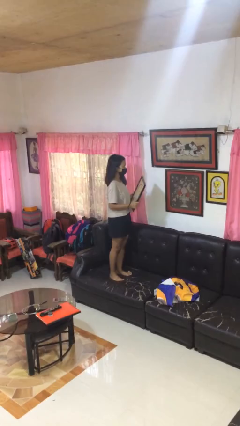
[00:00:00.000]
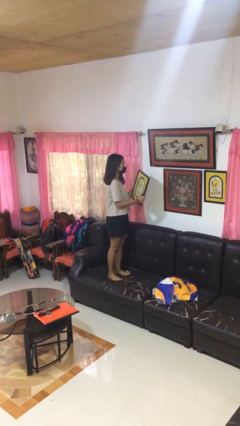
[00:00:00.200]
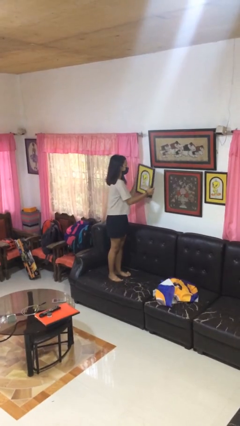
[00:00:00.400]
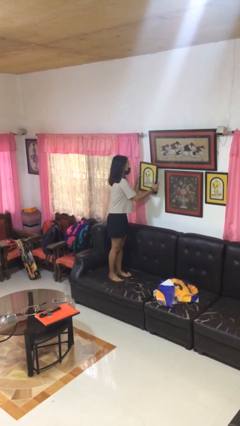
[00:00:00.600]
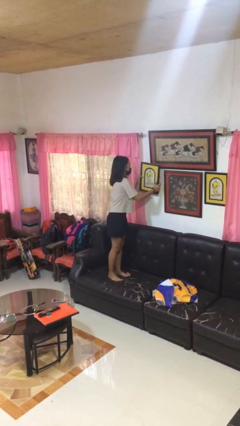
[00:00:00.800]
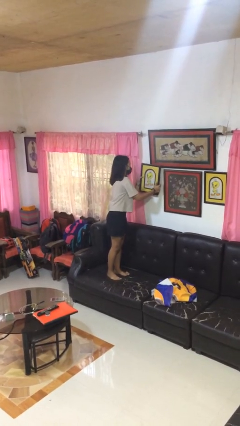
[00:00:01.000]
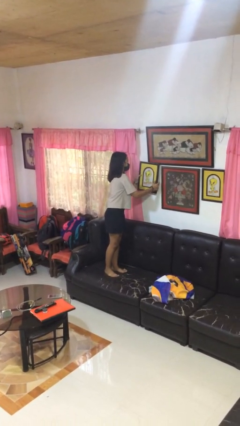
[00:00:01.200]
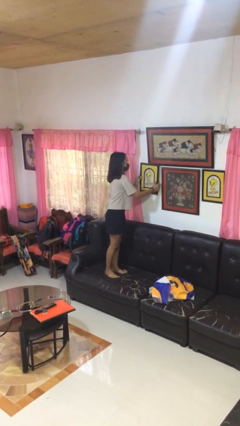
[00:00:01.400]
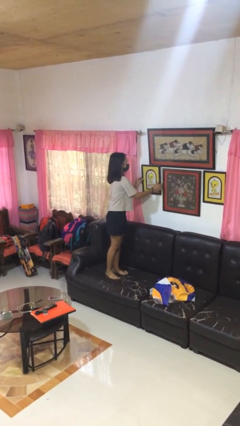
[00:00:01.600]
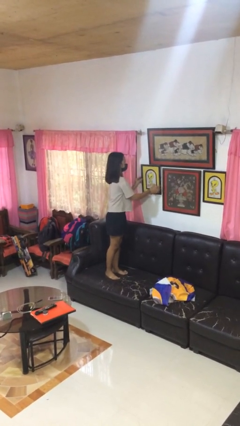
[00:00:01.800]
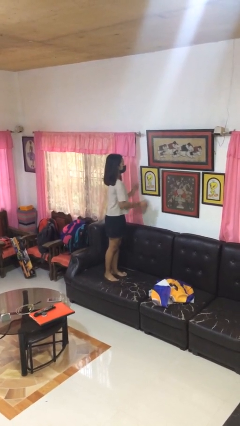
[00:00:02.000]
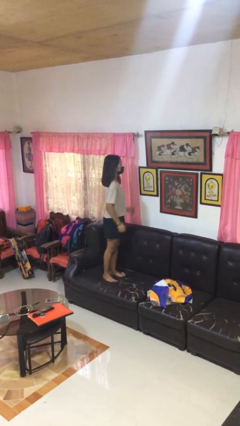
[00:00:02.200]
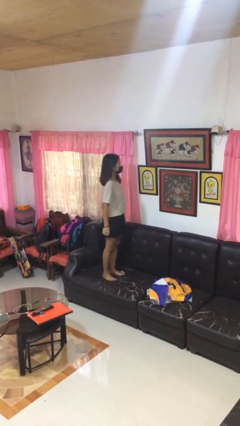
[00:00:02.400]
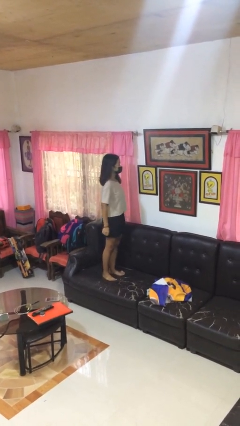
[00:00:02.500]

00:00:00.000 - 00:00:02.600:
person puts up picture frame

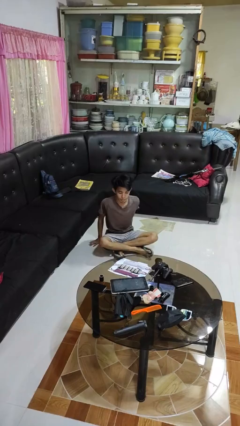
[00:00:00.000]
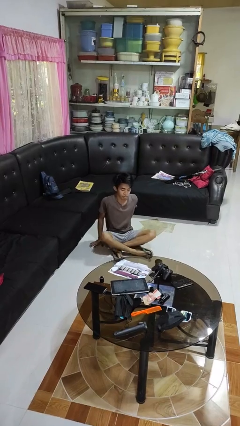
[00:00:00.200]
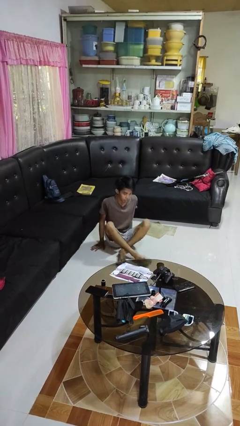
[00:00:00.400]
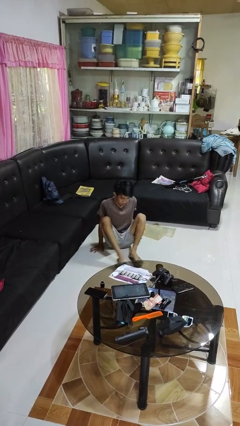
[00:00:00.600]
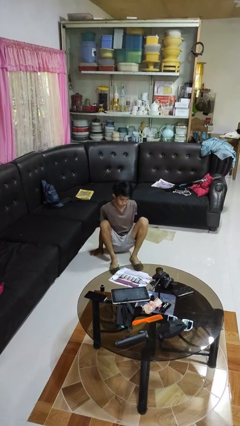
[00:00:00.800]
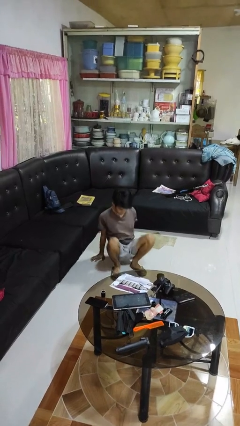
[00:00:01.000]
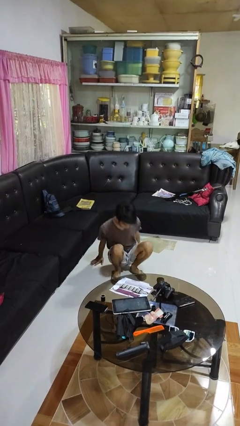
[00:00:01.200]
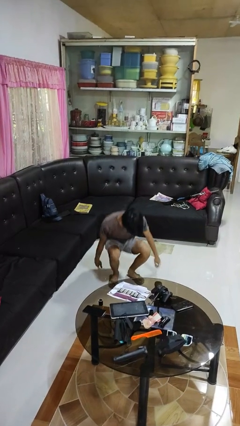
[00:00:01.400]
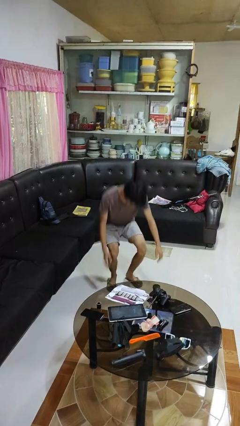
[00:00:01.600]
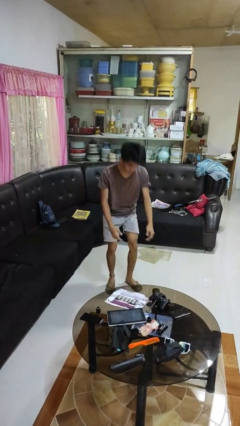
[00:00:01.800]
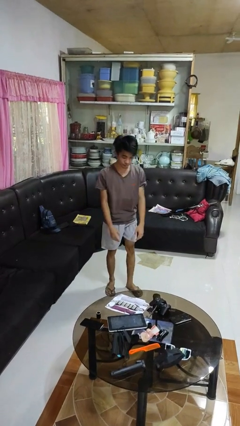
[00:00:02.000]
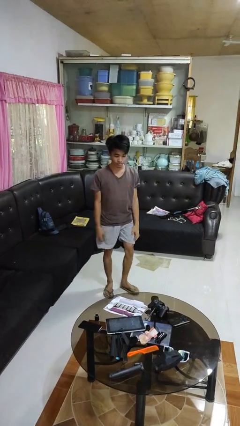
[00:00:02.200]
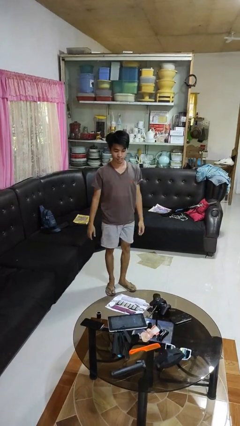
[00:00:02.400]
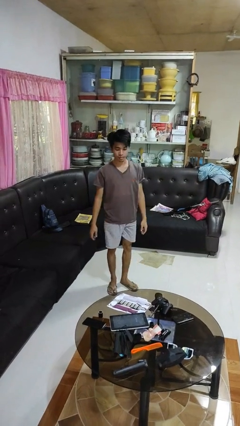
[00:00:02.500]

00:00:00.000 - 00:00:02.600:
person stands up from floor

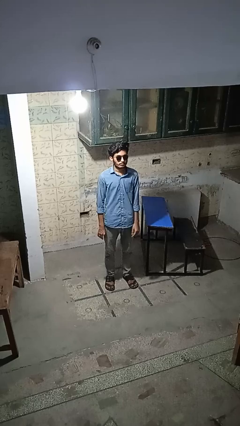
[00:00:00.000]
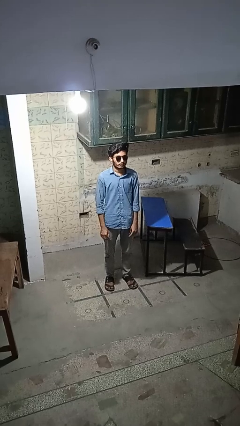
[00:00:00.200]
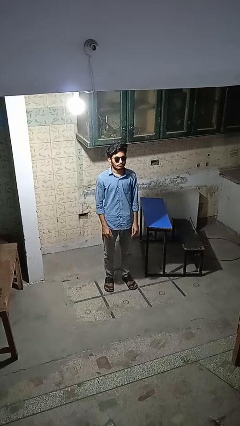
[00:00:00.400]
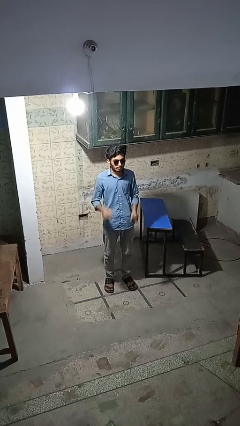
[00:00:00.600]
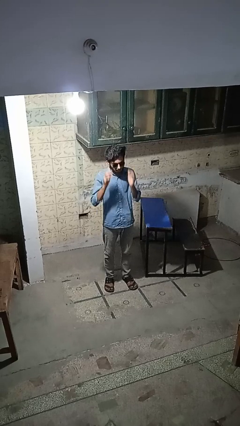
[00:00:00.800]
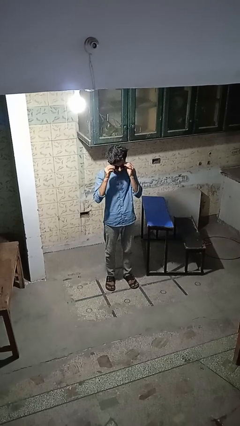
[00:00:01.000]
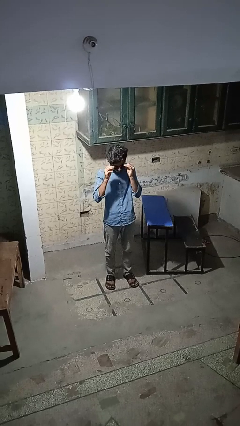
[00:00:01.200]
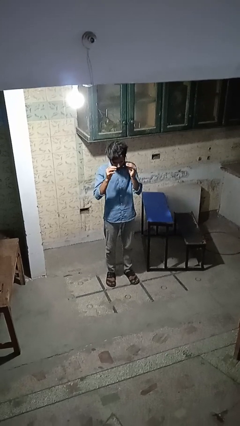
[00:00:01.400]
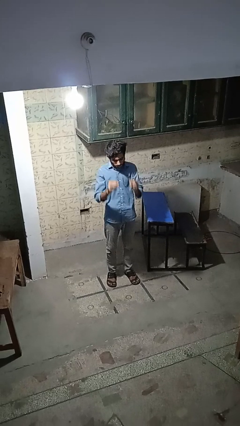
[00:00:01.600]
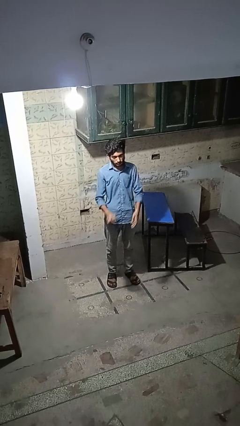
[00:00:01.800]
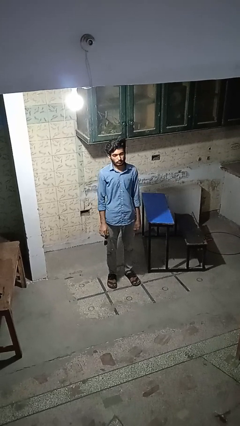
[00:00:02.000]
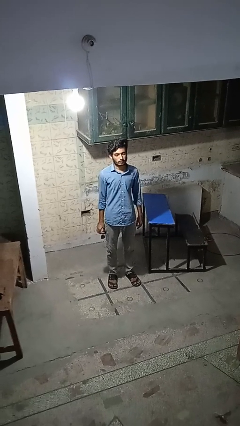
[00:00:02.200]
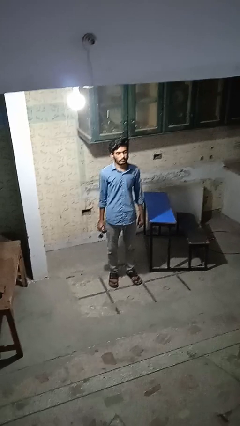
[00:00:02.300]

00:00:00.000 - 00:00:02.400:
person takes off sunglasses

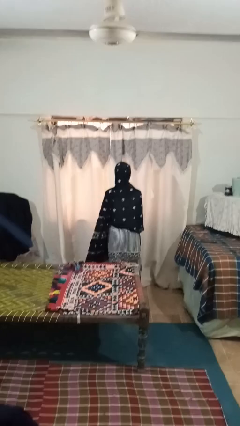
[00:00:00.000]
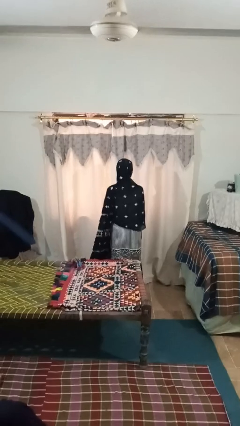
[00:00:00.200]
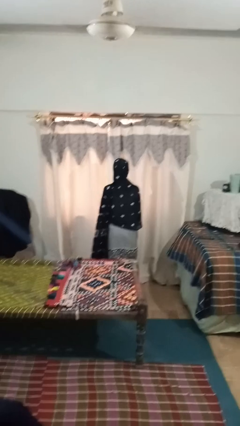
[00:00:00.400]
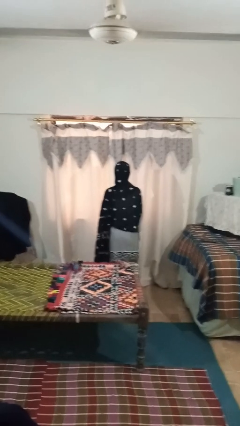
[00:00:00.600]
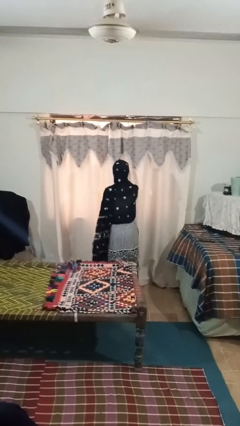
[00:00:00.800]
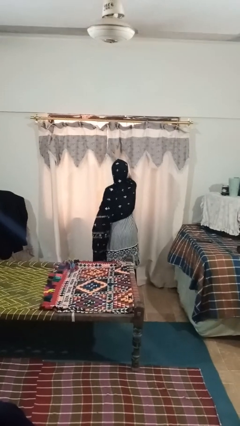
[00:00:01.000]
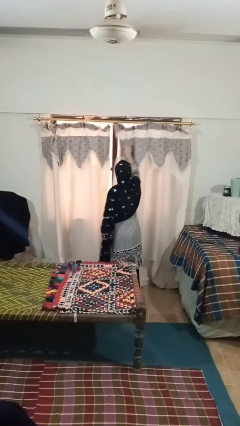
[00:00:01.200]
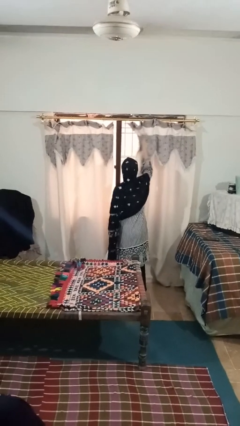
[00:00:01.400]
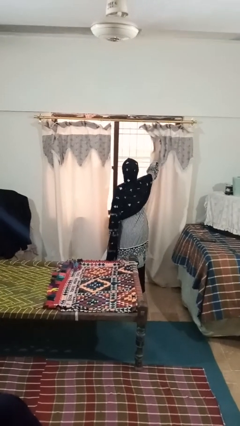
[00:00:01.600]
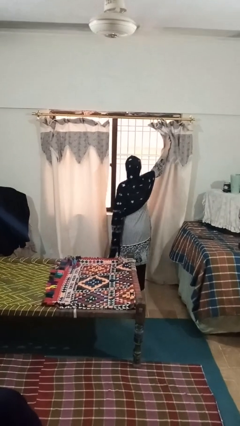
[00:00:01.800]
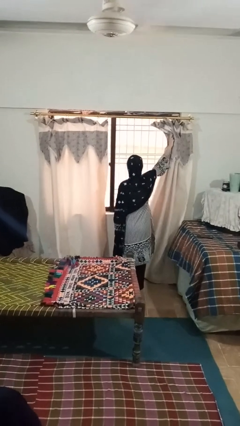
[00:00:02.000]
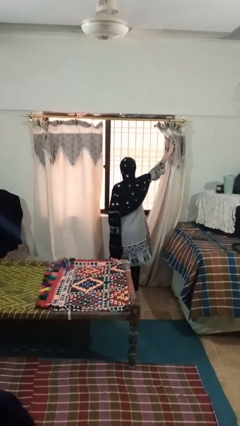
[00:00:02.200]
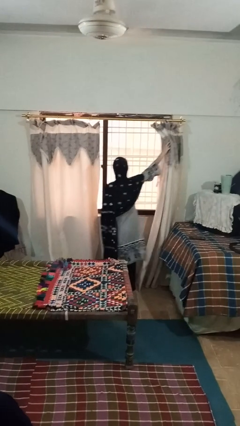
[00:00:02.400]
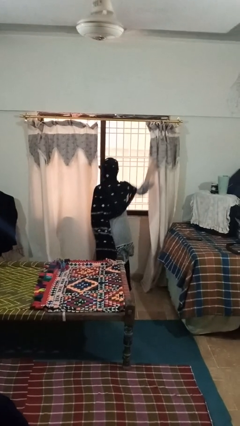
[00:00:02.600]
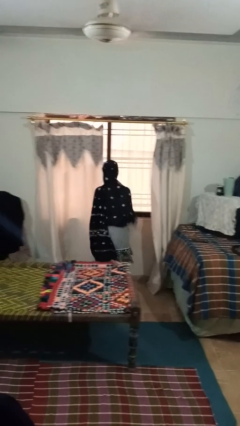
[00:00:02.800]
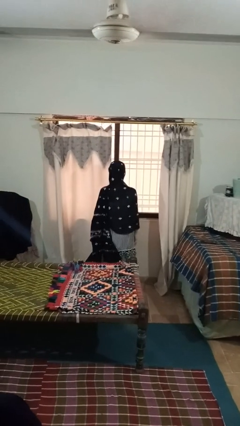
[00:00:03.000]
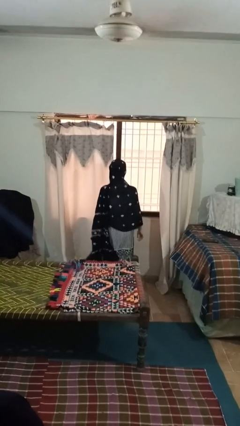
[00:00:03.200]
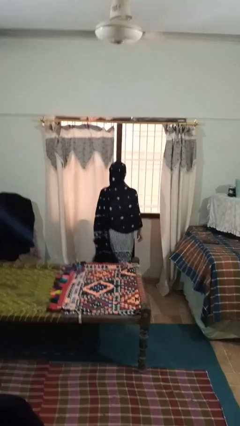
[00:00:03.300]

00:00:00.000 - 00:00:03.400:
person opens curtains

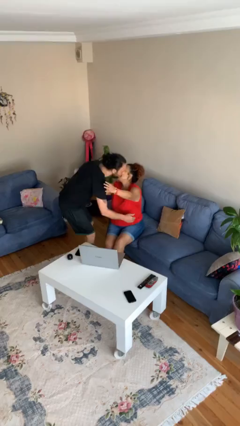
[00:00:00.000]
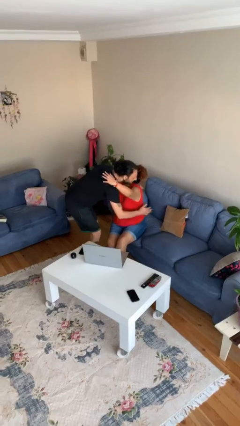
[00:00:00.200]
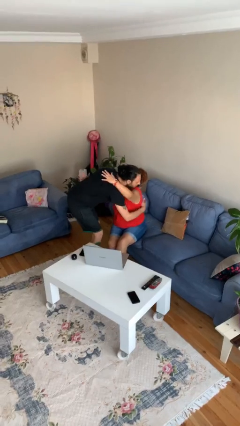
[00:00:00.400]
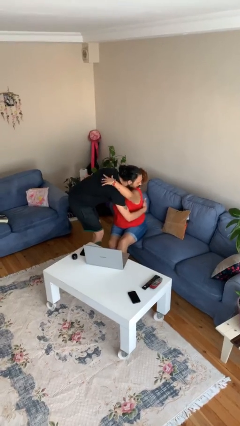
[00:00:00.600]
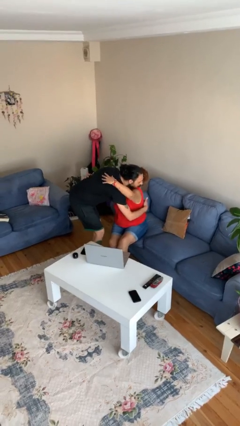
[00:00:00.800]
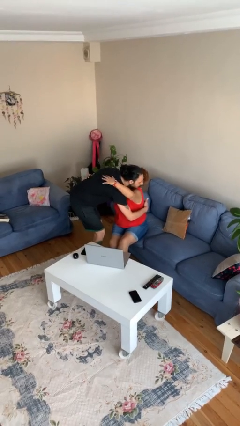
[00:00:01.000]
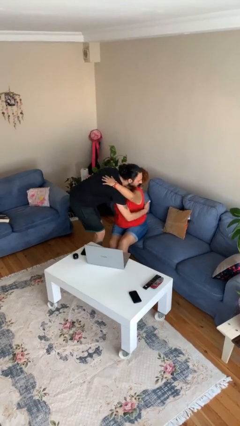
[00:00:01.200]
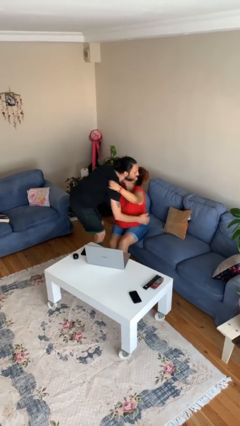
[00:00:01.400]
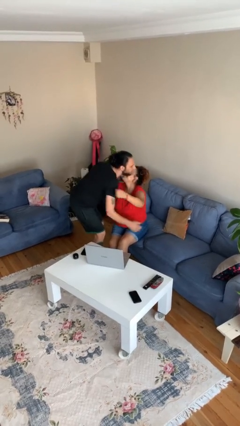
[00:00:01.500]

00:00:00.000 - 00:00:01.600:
person embraces person

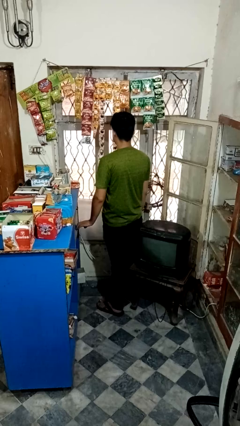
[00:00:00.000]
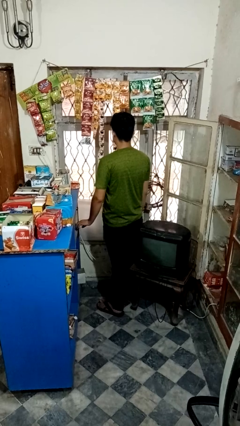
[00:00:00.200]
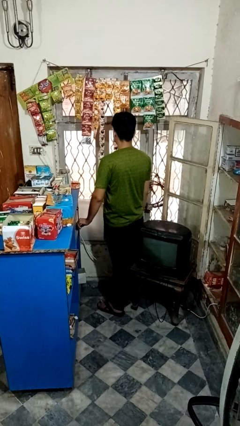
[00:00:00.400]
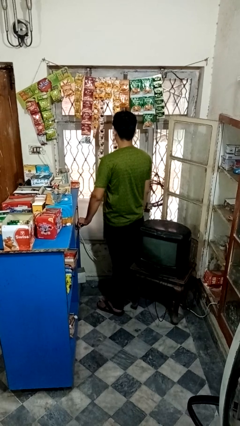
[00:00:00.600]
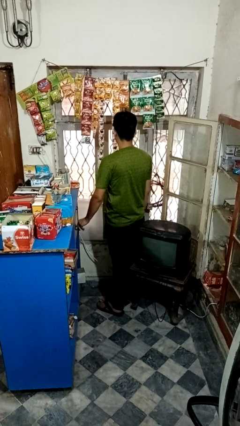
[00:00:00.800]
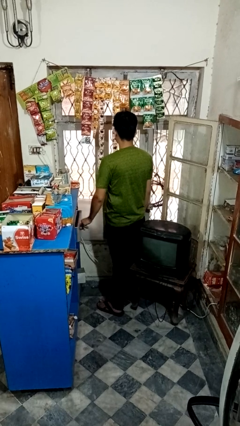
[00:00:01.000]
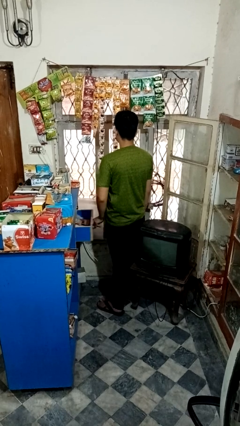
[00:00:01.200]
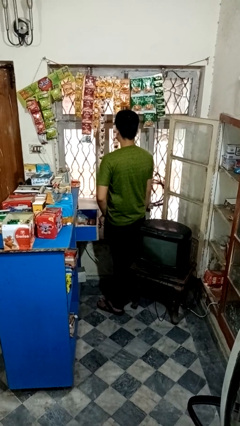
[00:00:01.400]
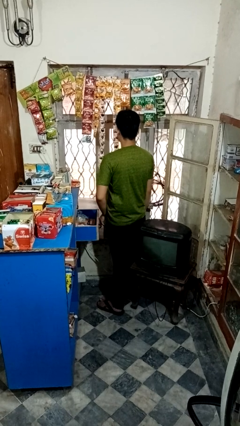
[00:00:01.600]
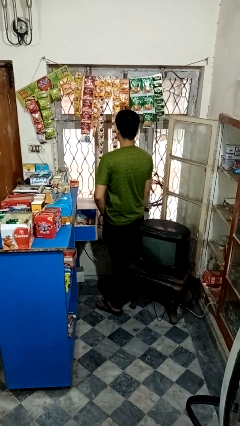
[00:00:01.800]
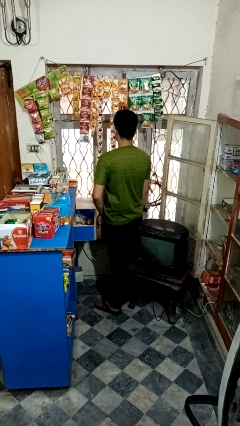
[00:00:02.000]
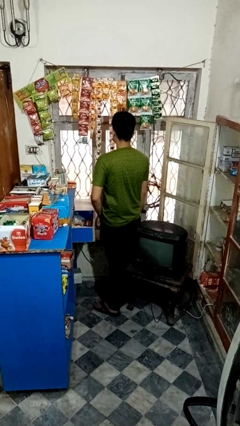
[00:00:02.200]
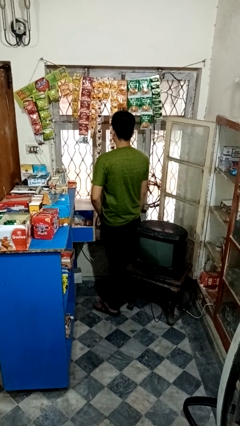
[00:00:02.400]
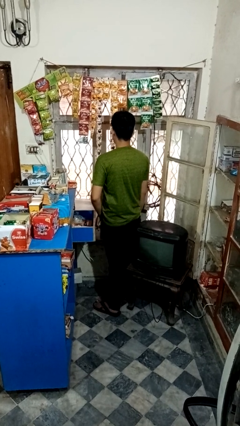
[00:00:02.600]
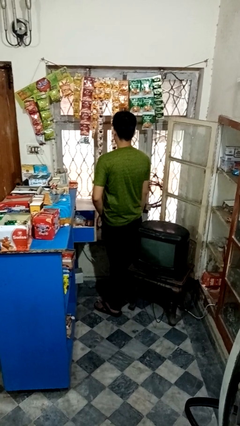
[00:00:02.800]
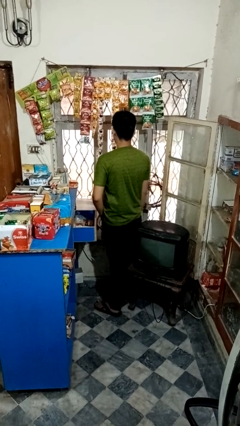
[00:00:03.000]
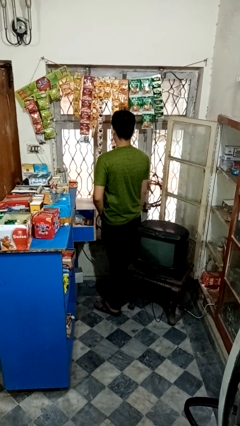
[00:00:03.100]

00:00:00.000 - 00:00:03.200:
person opens kitchen drawer

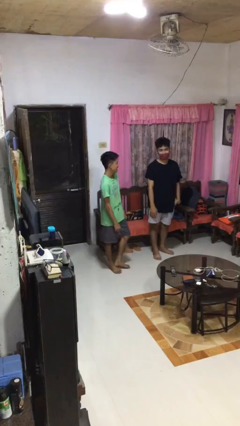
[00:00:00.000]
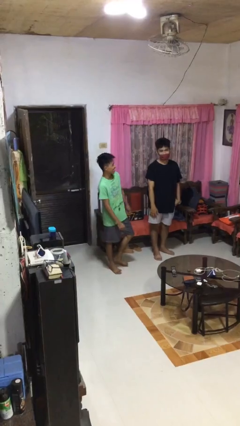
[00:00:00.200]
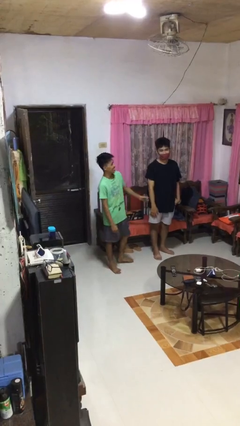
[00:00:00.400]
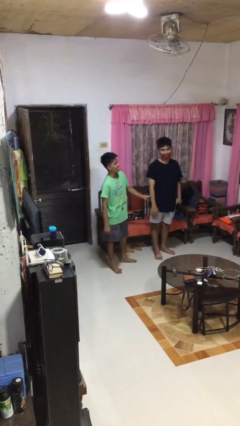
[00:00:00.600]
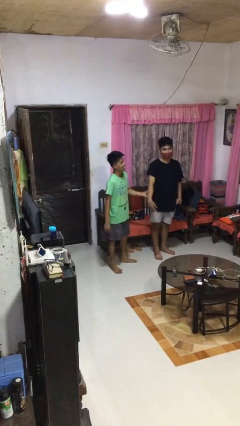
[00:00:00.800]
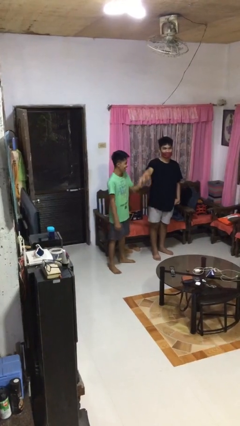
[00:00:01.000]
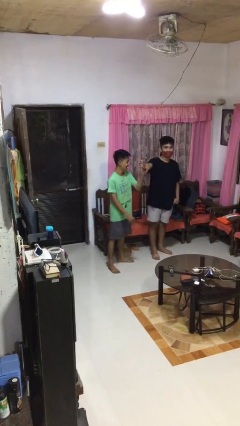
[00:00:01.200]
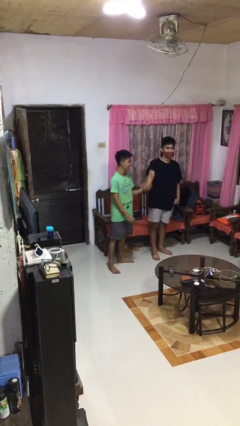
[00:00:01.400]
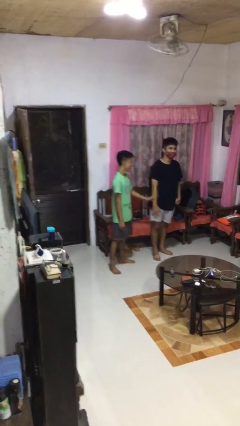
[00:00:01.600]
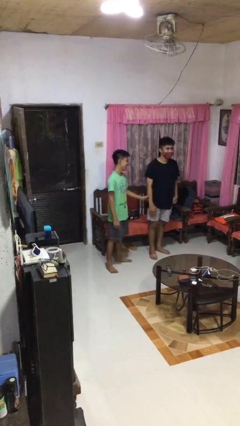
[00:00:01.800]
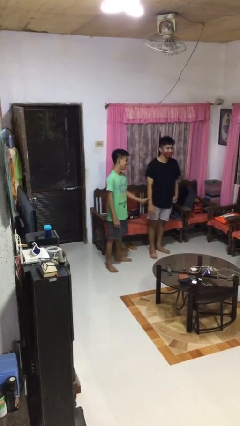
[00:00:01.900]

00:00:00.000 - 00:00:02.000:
person grabs person by forearm
